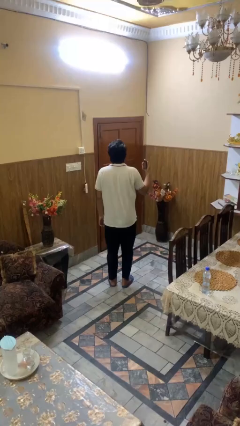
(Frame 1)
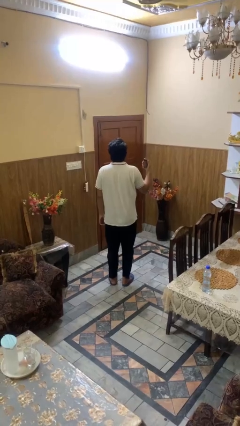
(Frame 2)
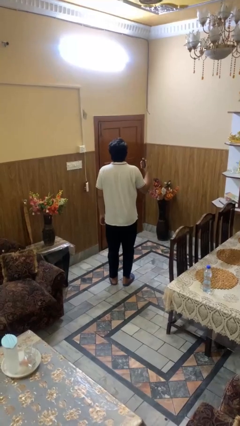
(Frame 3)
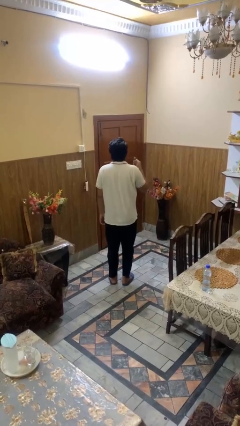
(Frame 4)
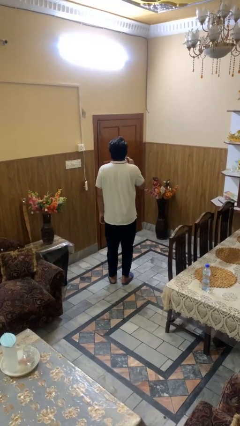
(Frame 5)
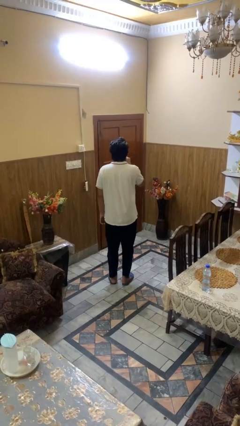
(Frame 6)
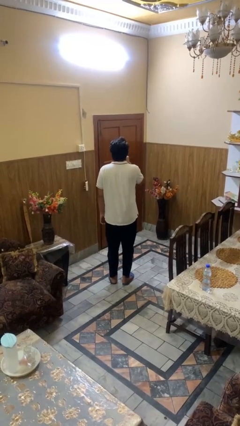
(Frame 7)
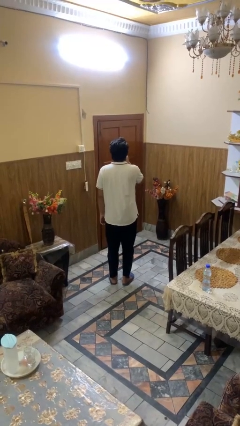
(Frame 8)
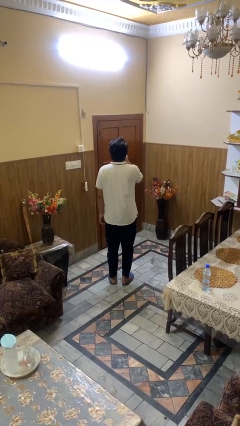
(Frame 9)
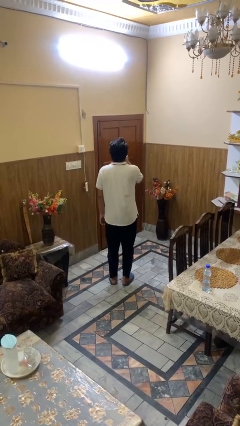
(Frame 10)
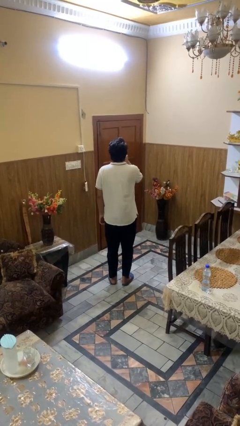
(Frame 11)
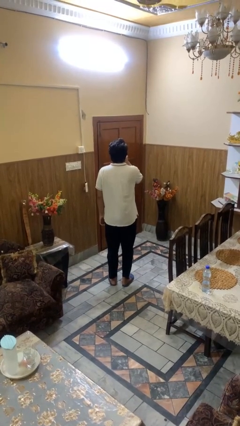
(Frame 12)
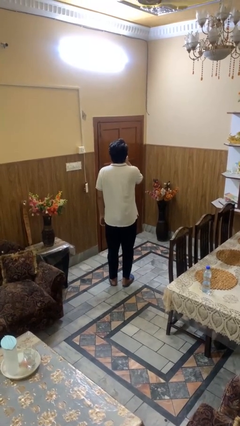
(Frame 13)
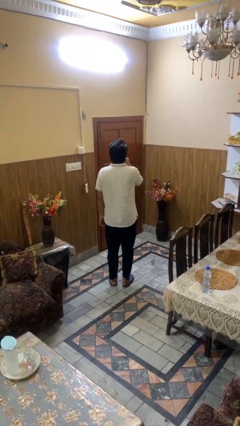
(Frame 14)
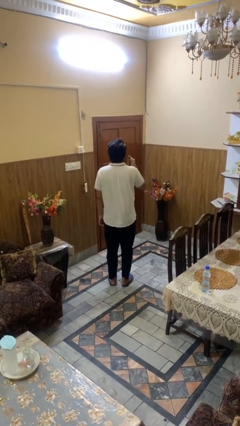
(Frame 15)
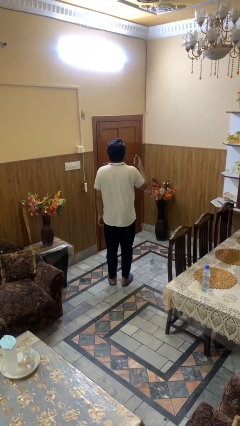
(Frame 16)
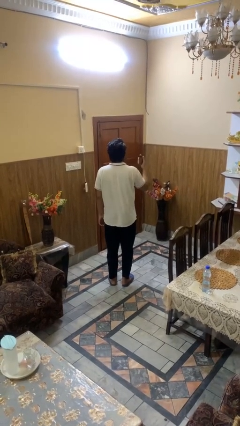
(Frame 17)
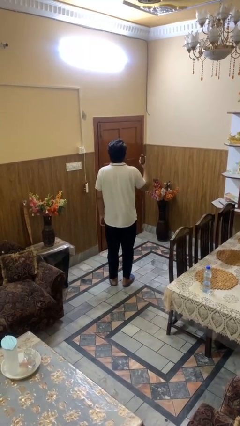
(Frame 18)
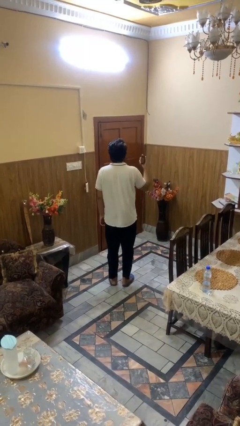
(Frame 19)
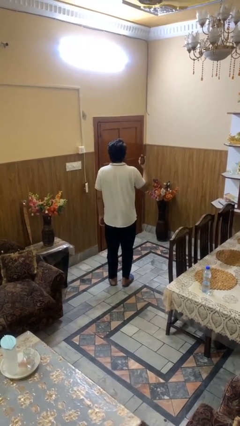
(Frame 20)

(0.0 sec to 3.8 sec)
person vapes

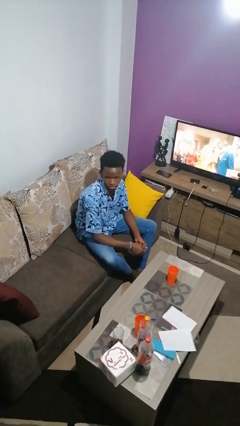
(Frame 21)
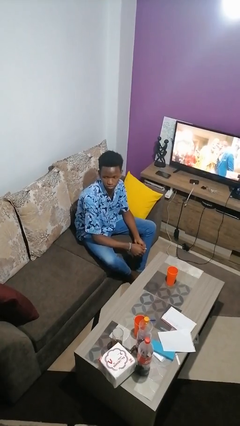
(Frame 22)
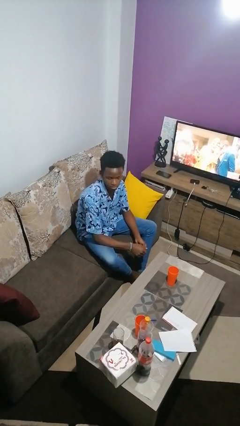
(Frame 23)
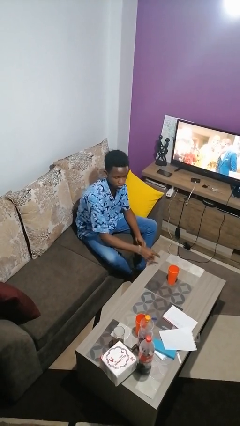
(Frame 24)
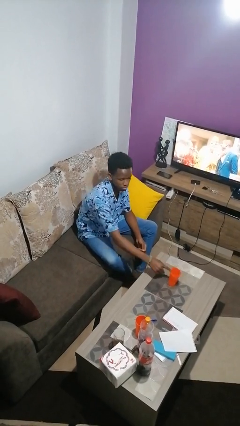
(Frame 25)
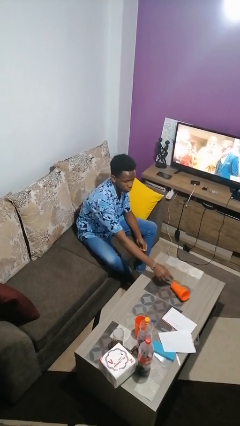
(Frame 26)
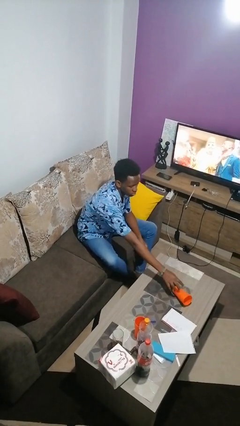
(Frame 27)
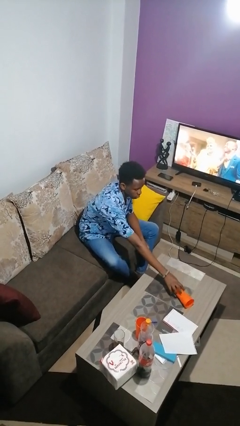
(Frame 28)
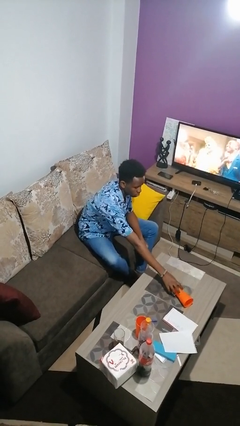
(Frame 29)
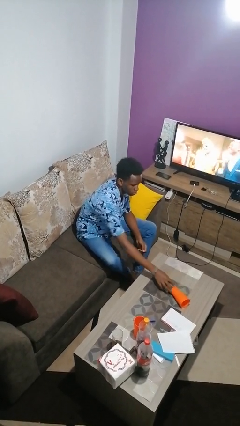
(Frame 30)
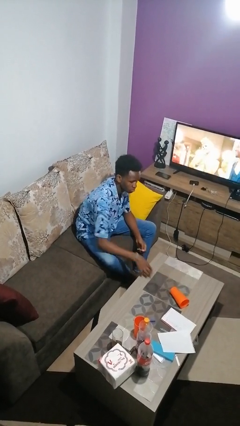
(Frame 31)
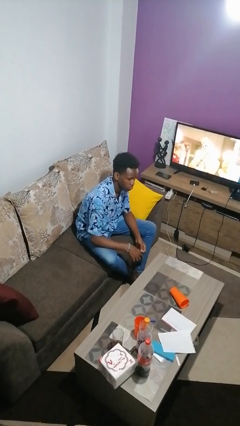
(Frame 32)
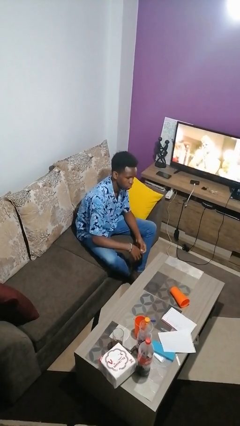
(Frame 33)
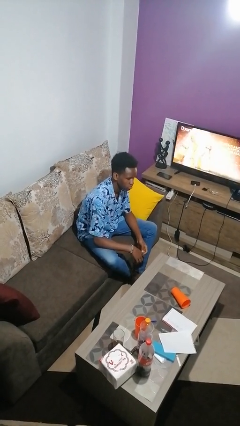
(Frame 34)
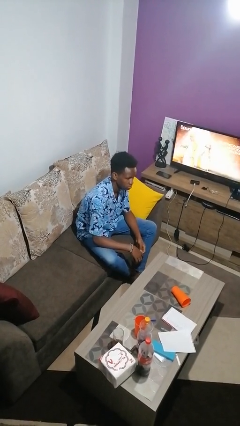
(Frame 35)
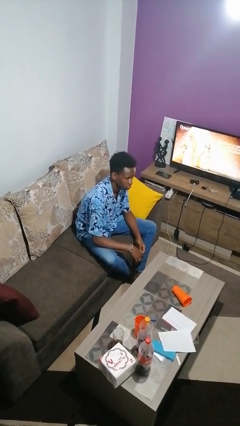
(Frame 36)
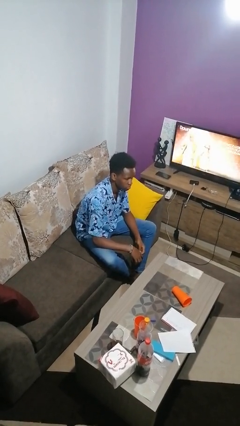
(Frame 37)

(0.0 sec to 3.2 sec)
person knocks over glass

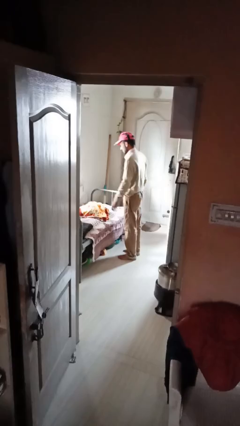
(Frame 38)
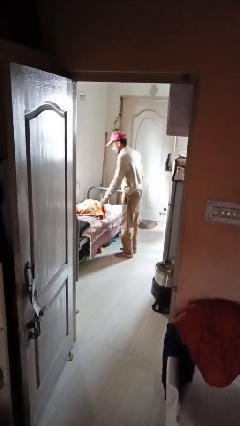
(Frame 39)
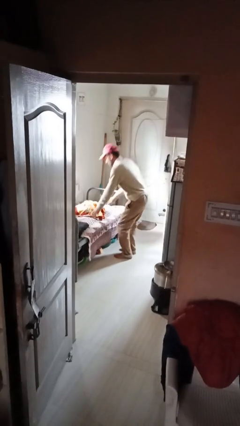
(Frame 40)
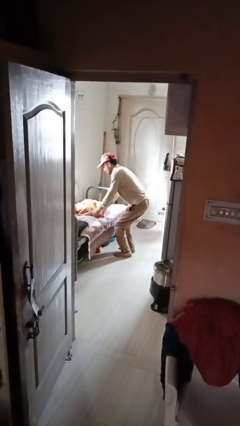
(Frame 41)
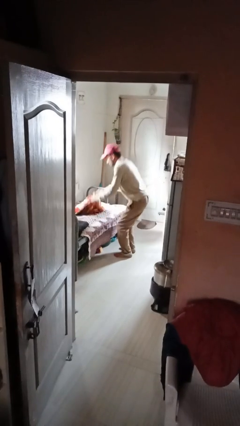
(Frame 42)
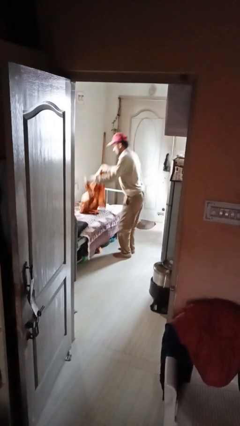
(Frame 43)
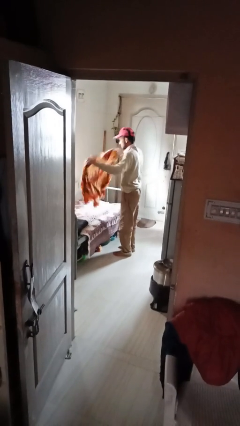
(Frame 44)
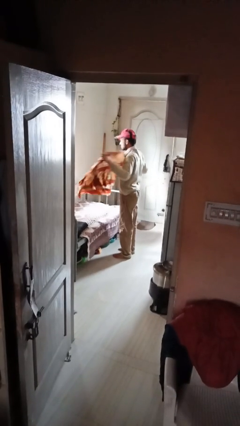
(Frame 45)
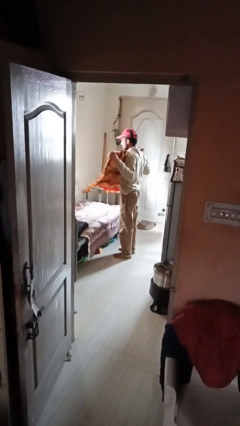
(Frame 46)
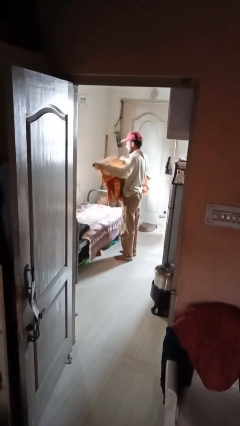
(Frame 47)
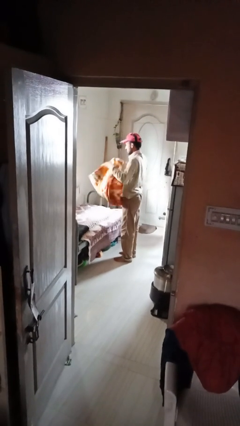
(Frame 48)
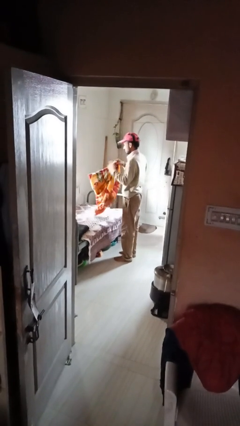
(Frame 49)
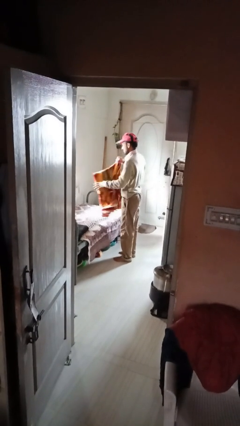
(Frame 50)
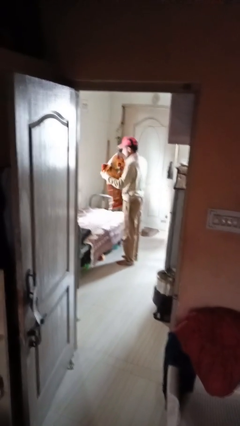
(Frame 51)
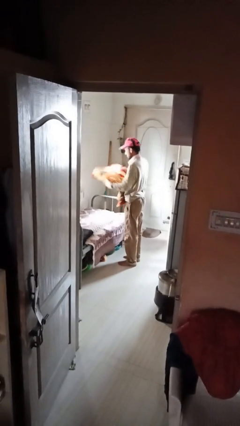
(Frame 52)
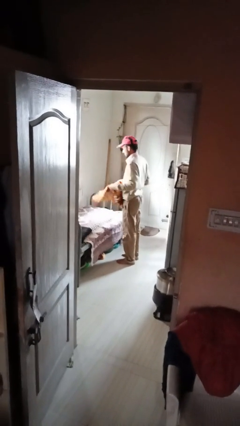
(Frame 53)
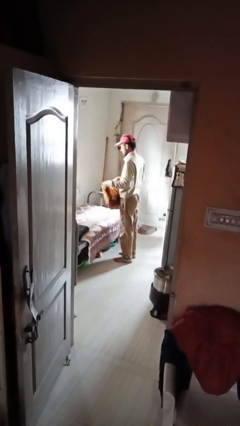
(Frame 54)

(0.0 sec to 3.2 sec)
person folds blanket

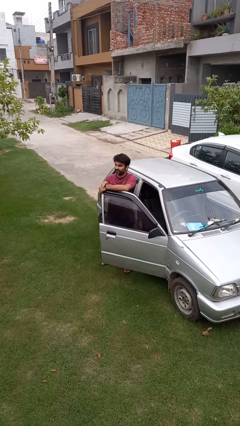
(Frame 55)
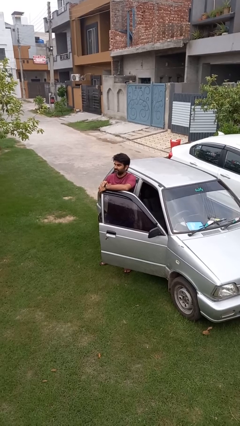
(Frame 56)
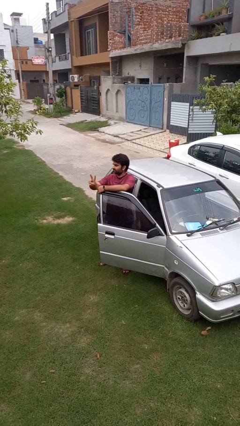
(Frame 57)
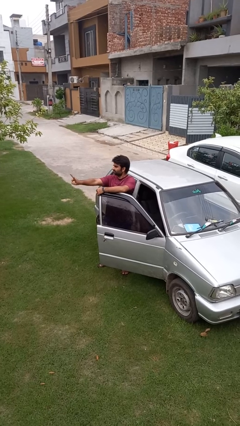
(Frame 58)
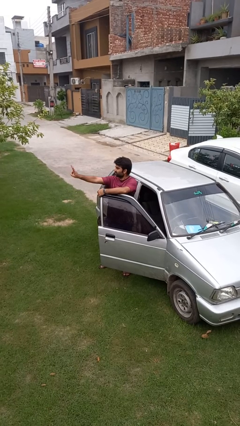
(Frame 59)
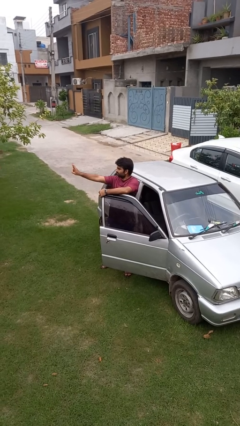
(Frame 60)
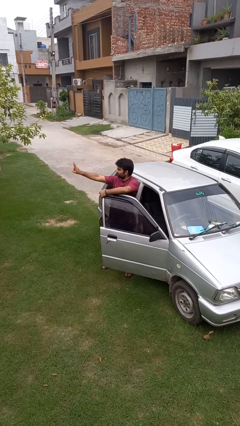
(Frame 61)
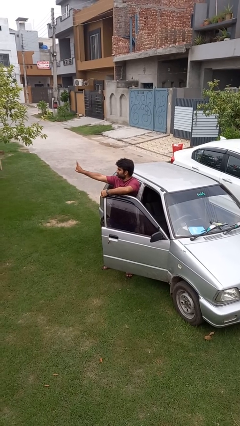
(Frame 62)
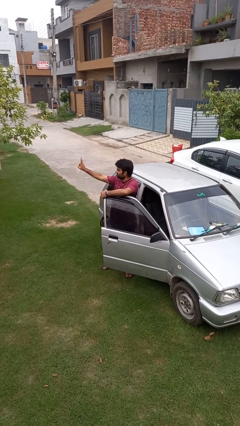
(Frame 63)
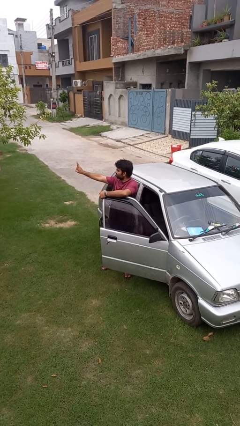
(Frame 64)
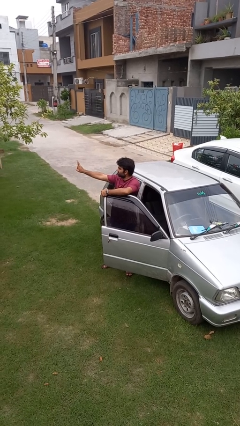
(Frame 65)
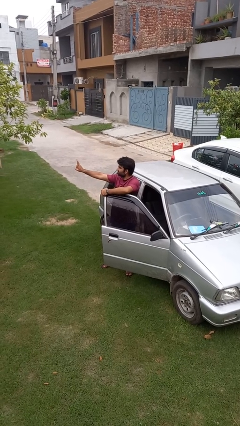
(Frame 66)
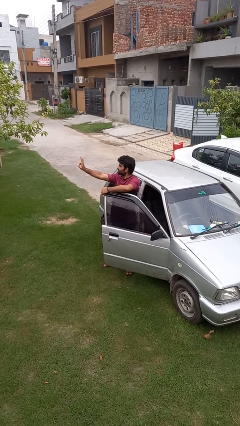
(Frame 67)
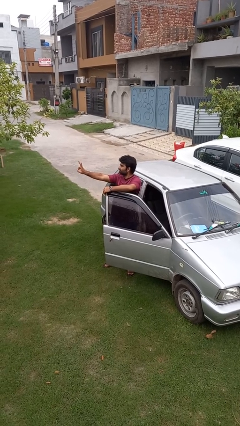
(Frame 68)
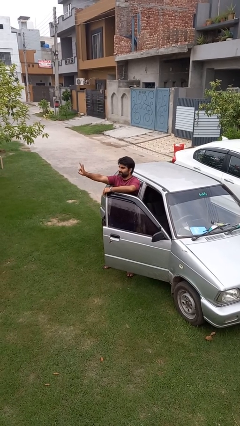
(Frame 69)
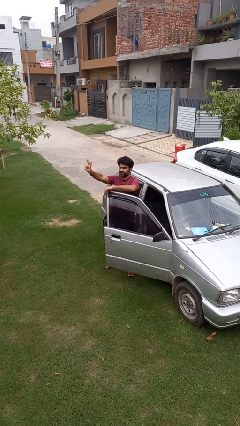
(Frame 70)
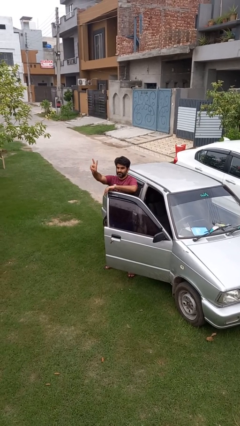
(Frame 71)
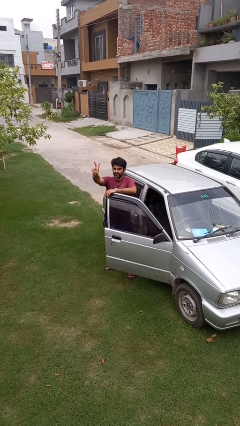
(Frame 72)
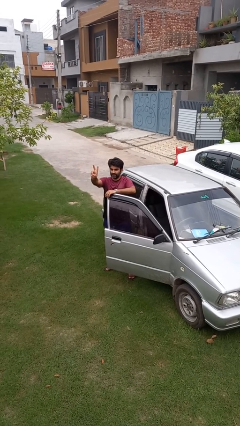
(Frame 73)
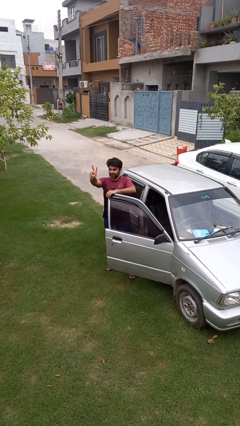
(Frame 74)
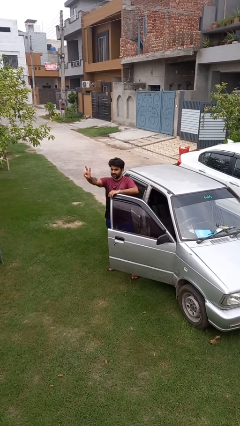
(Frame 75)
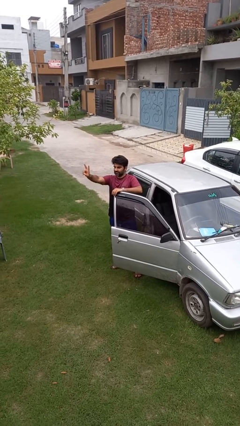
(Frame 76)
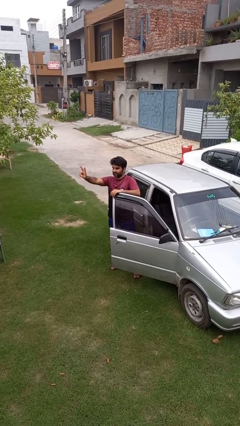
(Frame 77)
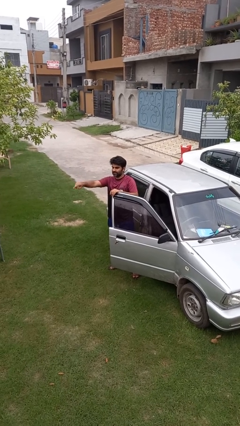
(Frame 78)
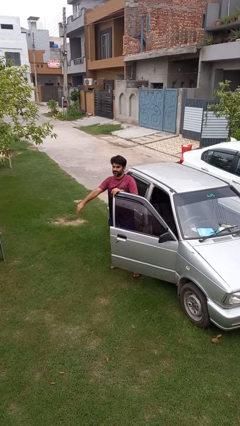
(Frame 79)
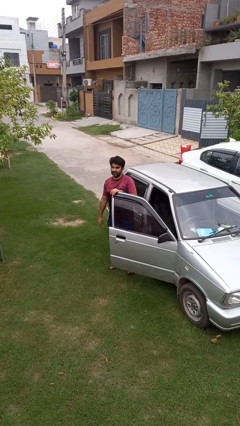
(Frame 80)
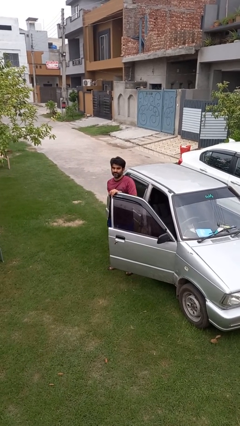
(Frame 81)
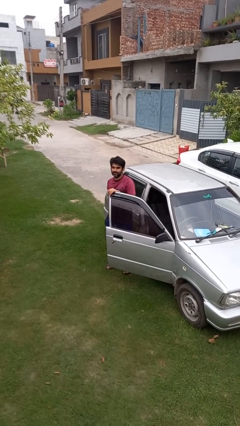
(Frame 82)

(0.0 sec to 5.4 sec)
person gestures peace

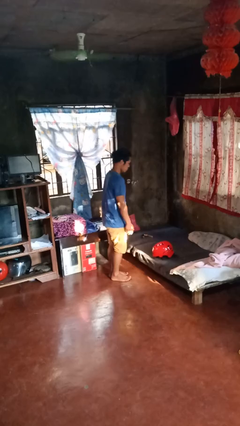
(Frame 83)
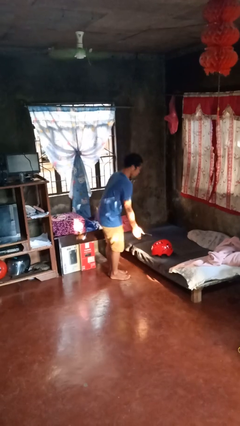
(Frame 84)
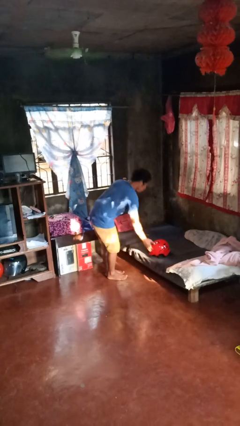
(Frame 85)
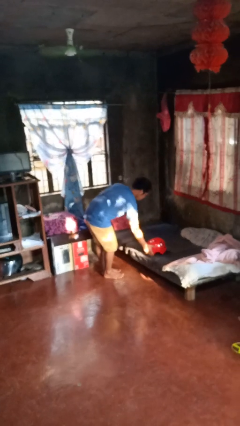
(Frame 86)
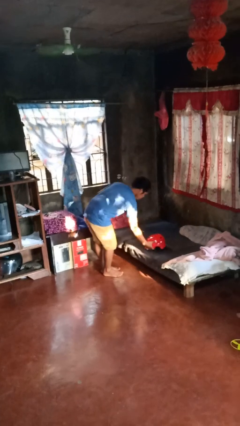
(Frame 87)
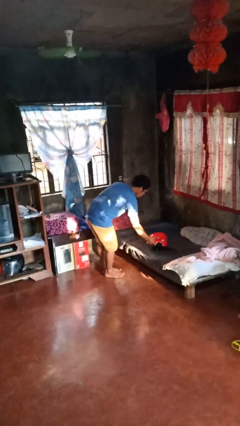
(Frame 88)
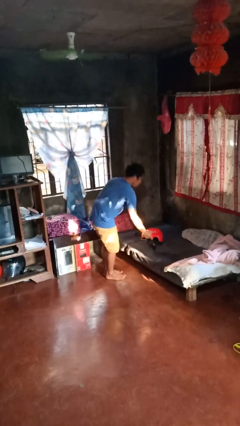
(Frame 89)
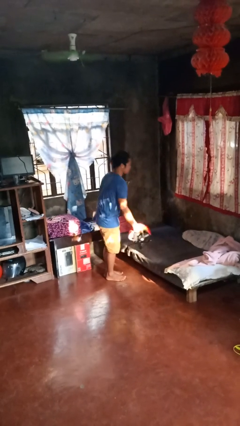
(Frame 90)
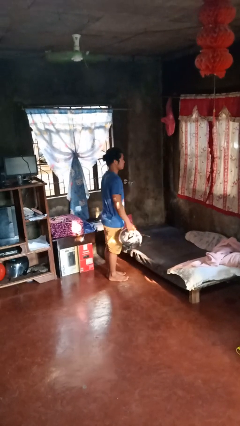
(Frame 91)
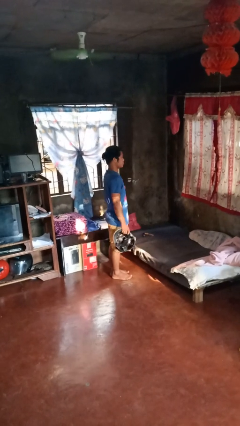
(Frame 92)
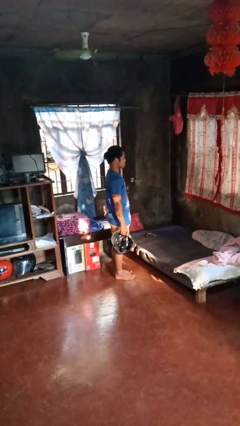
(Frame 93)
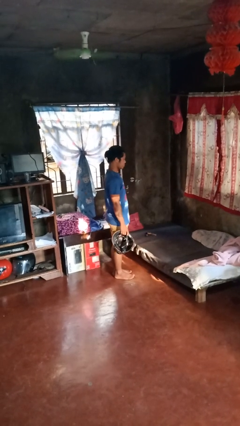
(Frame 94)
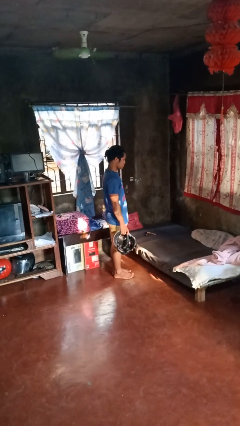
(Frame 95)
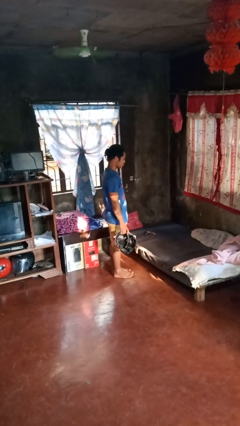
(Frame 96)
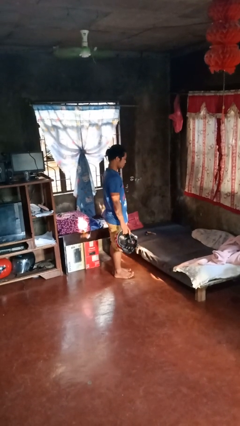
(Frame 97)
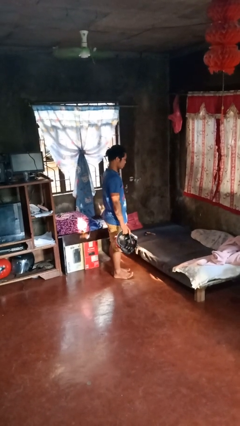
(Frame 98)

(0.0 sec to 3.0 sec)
person picks up object from bed
